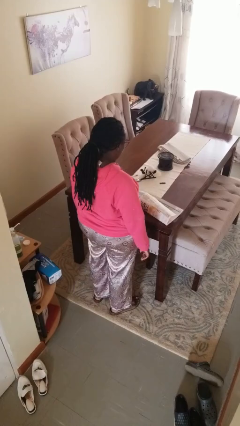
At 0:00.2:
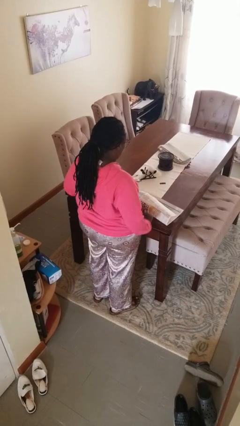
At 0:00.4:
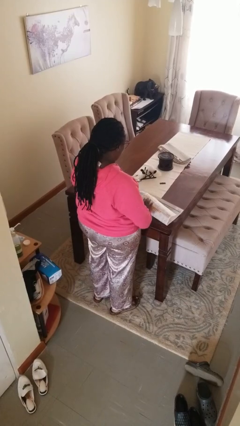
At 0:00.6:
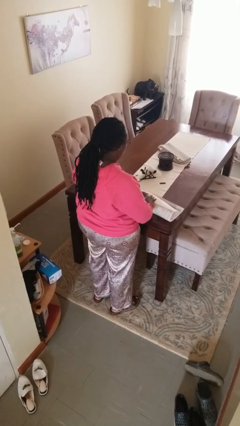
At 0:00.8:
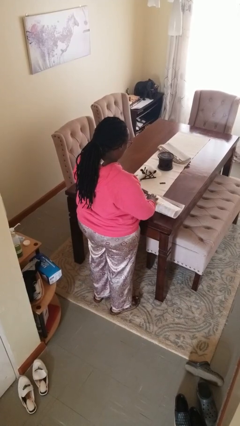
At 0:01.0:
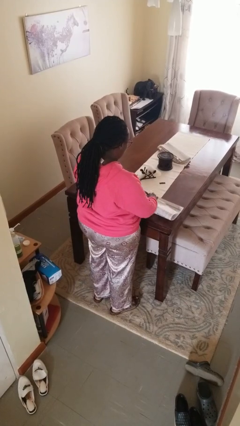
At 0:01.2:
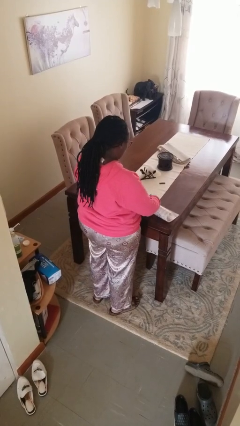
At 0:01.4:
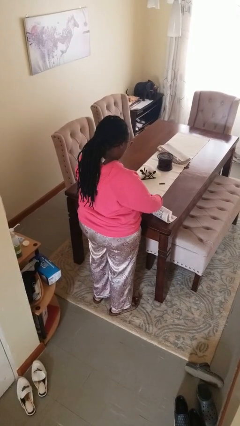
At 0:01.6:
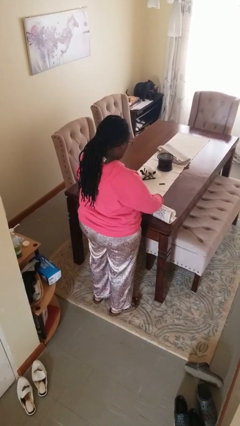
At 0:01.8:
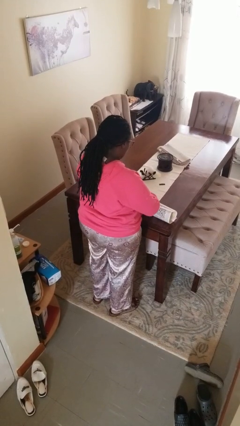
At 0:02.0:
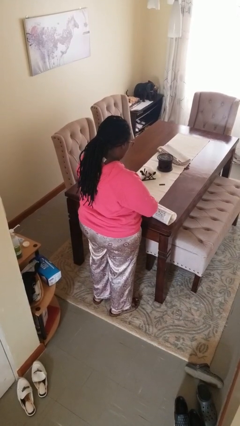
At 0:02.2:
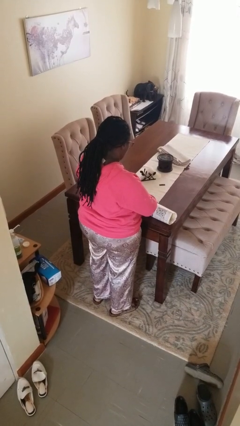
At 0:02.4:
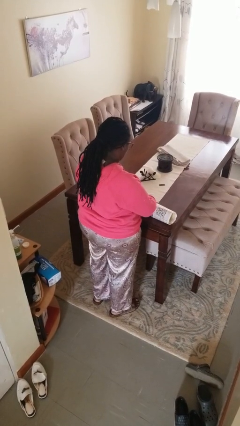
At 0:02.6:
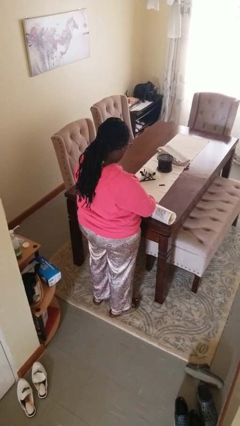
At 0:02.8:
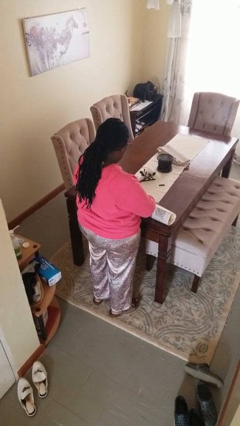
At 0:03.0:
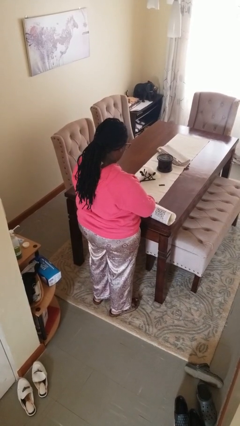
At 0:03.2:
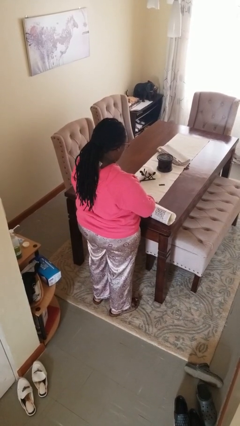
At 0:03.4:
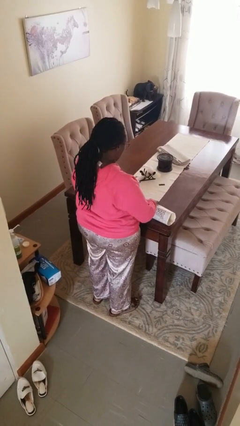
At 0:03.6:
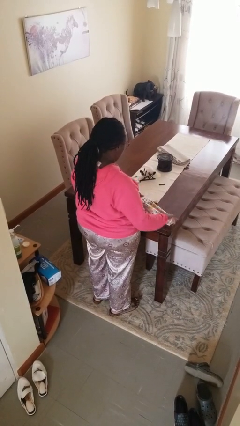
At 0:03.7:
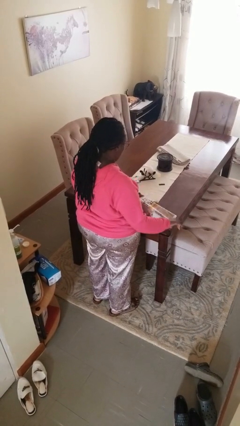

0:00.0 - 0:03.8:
person wraps box

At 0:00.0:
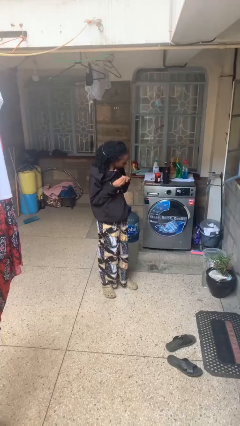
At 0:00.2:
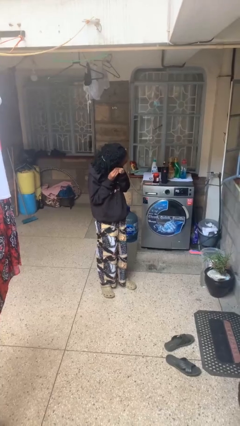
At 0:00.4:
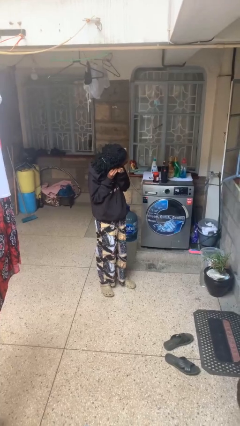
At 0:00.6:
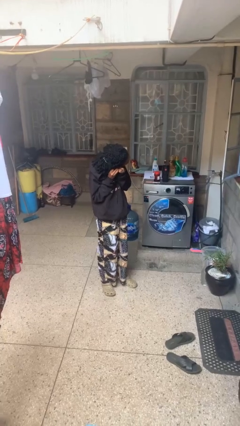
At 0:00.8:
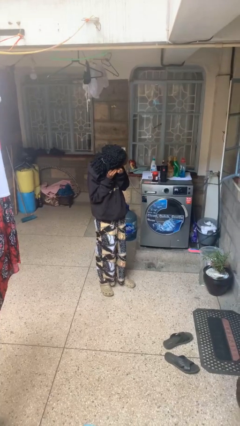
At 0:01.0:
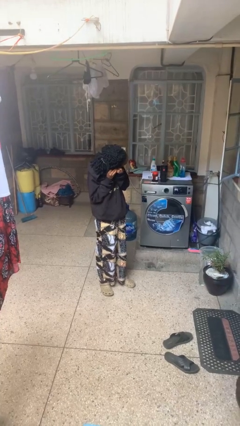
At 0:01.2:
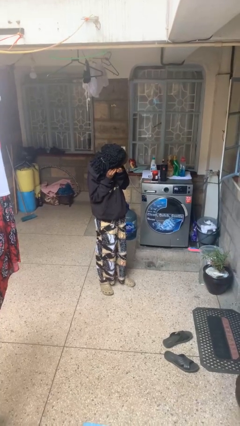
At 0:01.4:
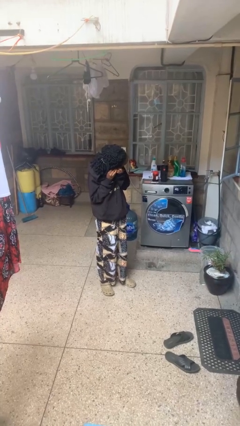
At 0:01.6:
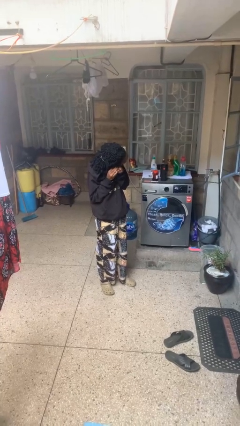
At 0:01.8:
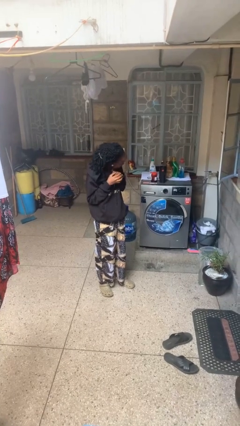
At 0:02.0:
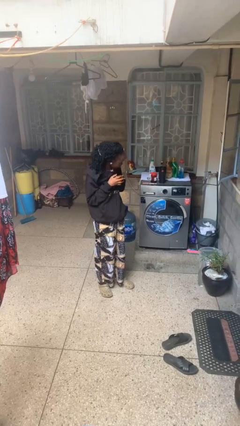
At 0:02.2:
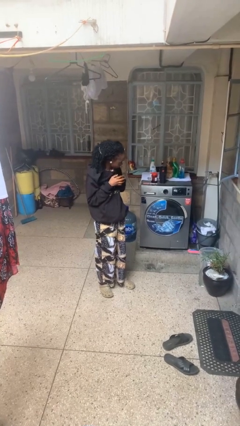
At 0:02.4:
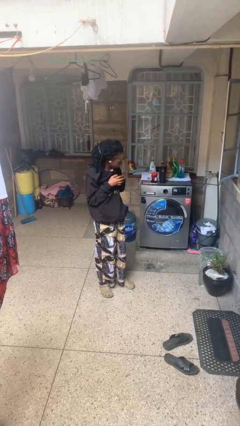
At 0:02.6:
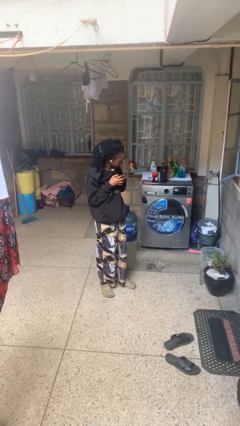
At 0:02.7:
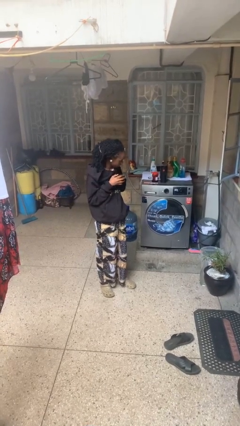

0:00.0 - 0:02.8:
person puts on earrings

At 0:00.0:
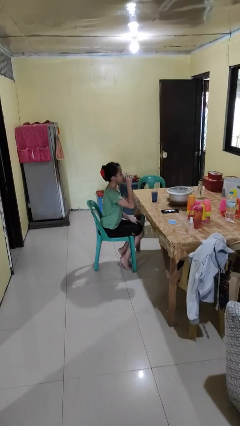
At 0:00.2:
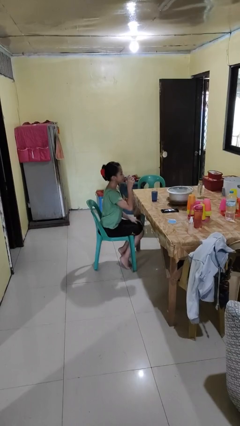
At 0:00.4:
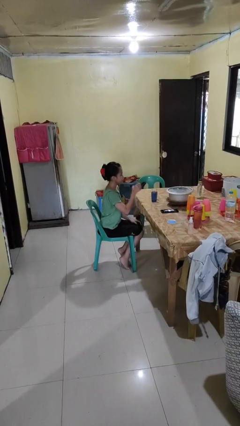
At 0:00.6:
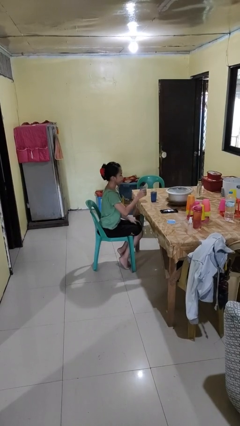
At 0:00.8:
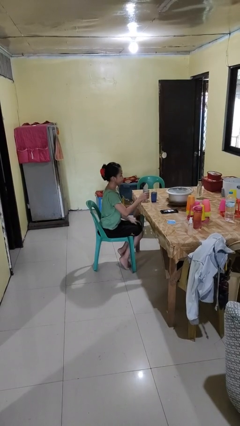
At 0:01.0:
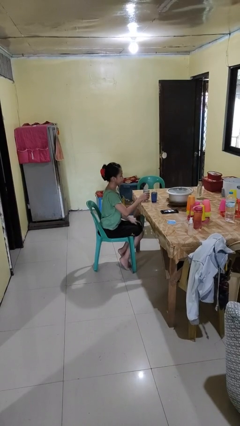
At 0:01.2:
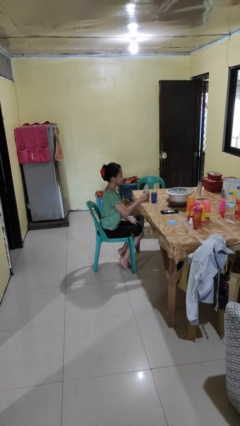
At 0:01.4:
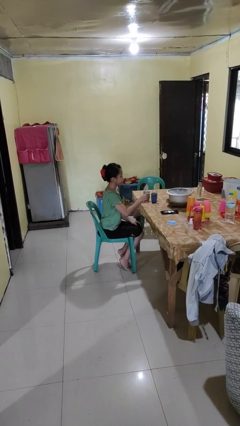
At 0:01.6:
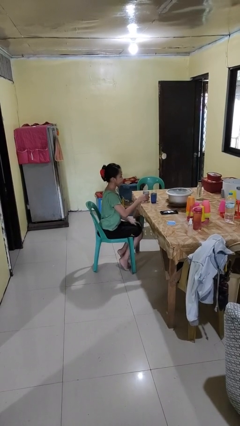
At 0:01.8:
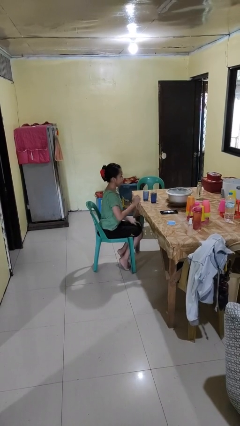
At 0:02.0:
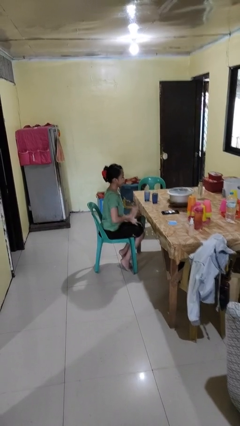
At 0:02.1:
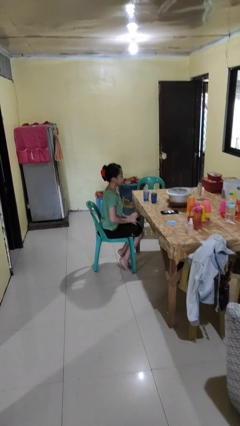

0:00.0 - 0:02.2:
person puts down object on table

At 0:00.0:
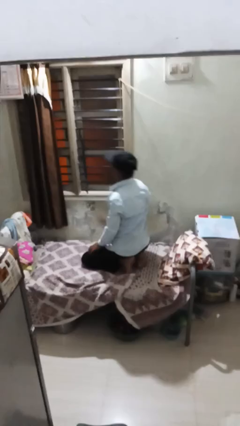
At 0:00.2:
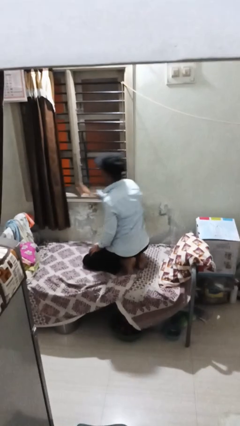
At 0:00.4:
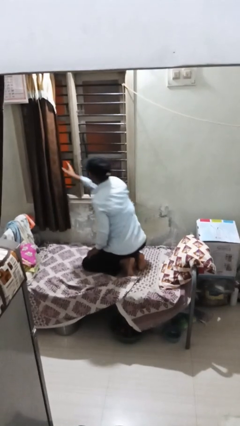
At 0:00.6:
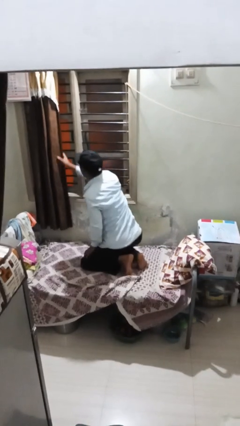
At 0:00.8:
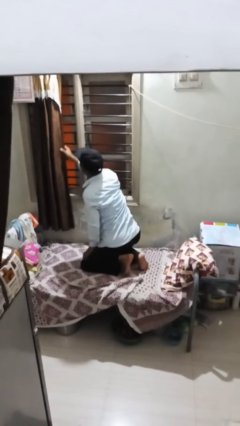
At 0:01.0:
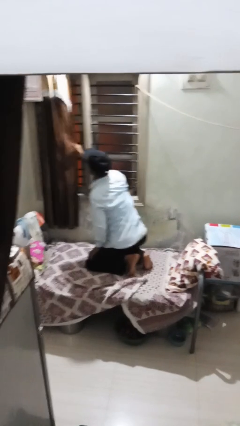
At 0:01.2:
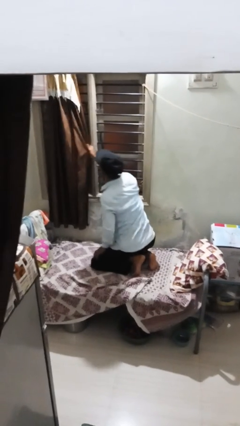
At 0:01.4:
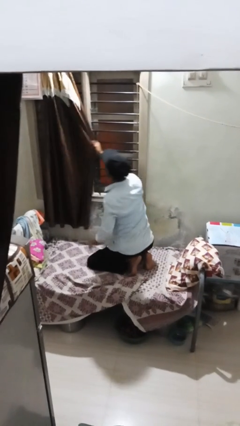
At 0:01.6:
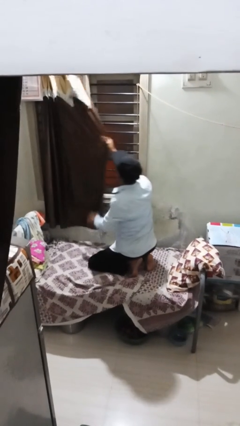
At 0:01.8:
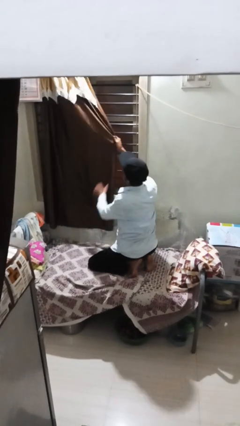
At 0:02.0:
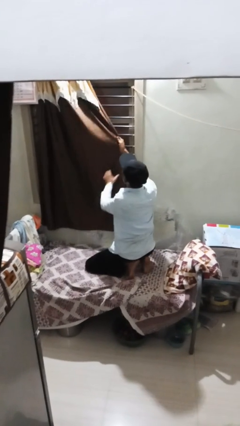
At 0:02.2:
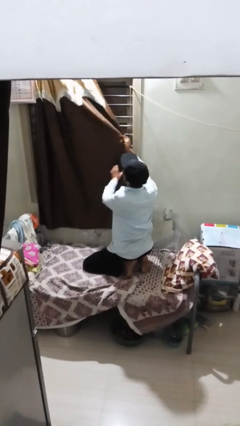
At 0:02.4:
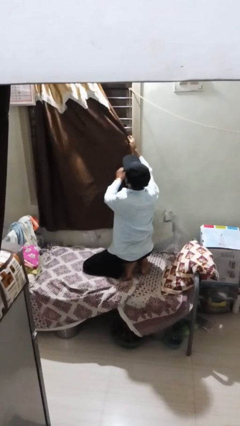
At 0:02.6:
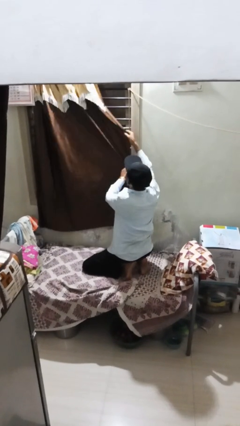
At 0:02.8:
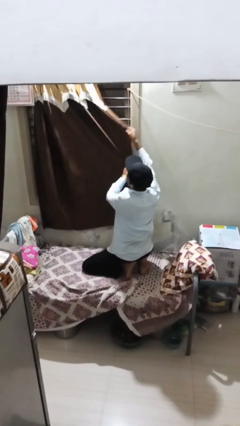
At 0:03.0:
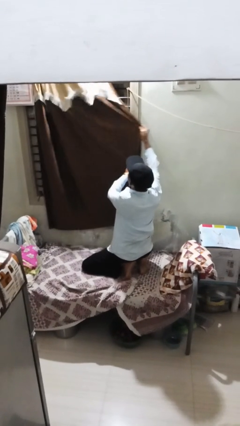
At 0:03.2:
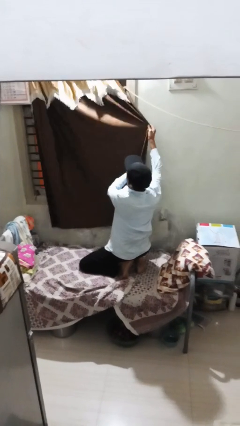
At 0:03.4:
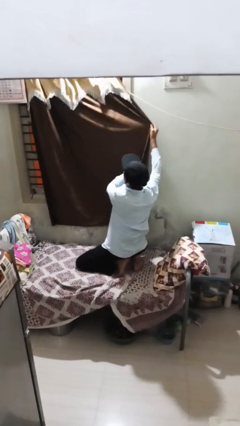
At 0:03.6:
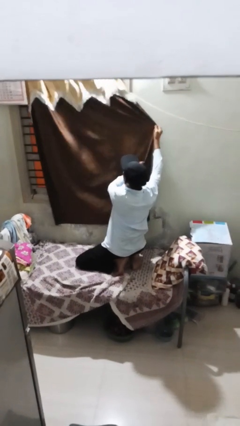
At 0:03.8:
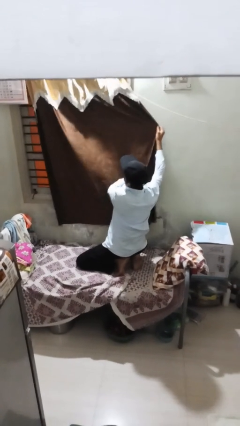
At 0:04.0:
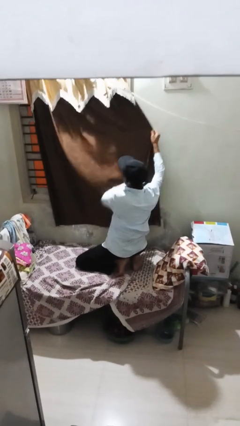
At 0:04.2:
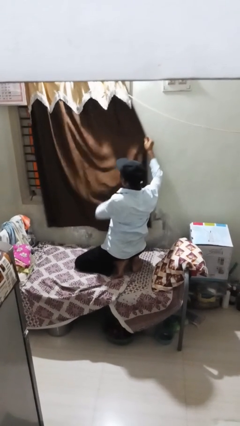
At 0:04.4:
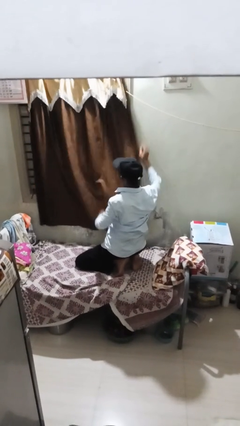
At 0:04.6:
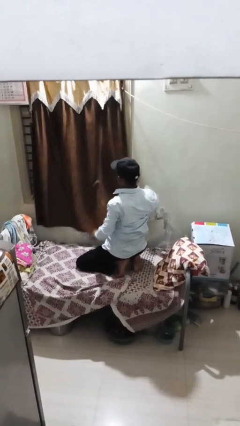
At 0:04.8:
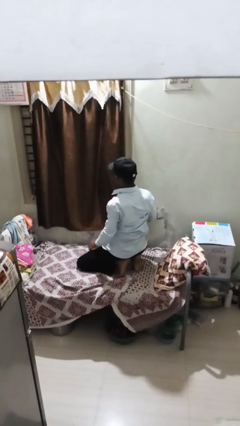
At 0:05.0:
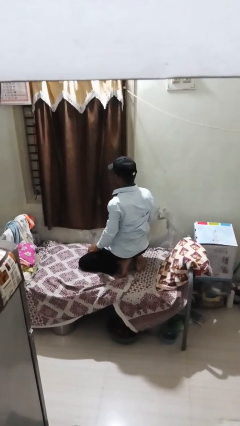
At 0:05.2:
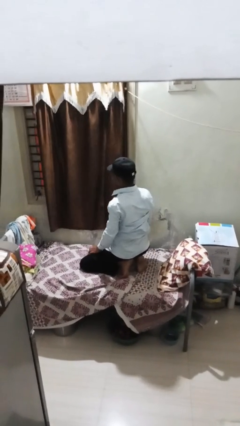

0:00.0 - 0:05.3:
person closes curtains

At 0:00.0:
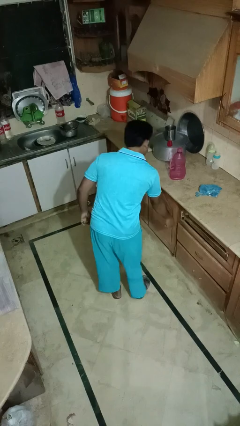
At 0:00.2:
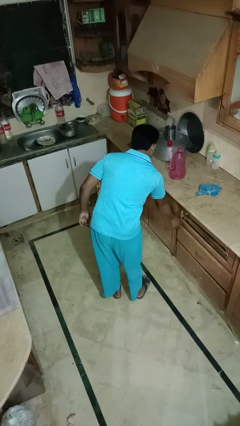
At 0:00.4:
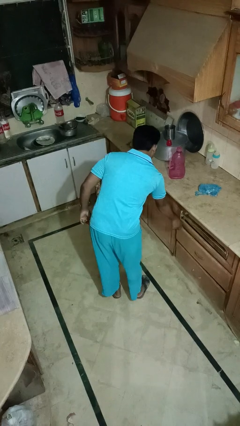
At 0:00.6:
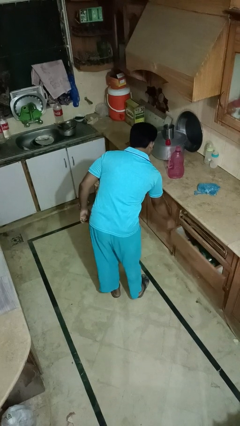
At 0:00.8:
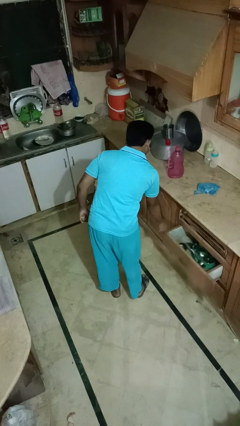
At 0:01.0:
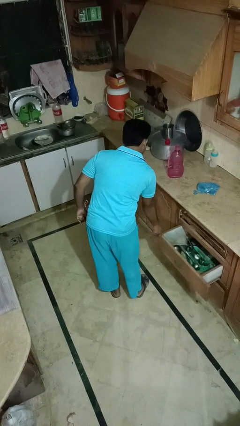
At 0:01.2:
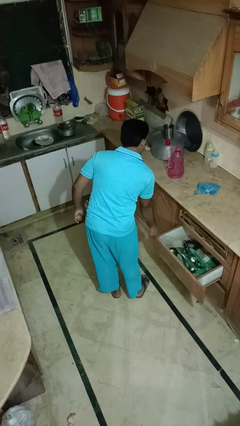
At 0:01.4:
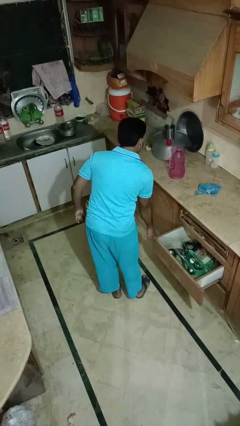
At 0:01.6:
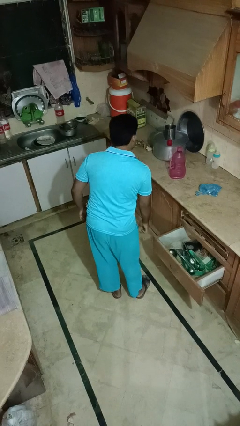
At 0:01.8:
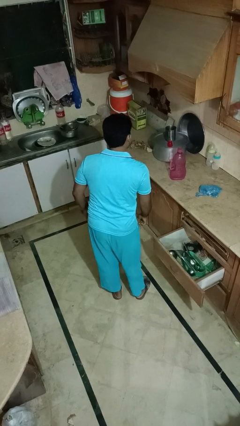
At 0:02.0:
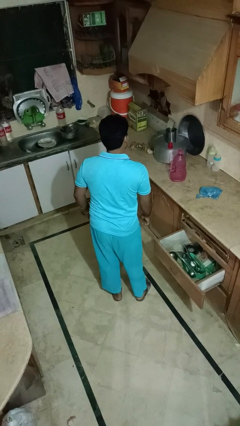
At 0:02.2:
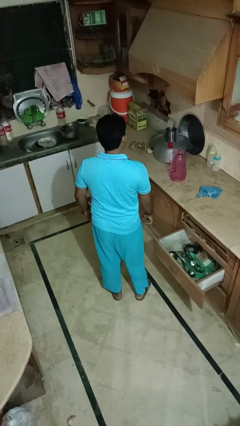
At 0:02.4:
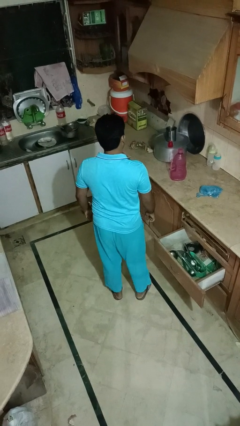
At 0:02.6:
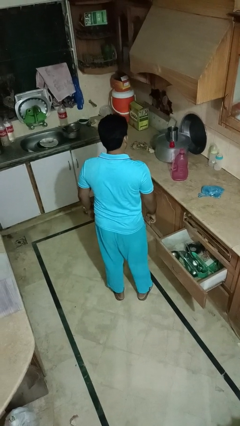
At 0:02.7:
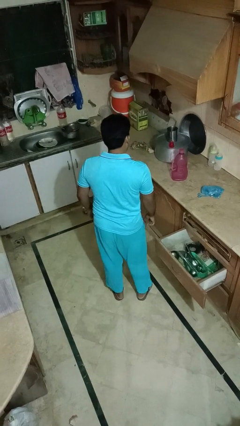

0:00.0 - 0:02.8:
person opens kitchen drawer

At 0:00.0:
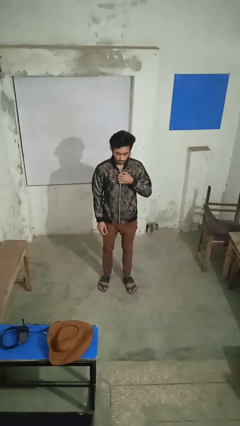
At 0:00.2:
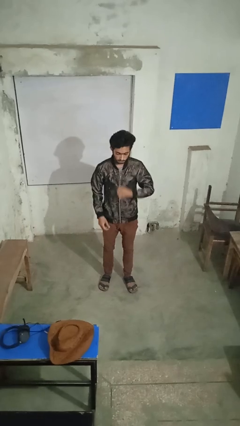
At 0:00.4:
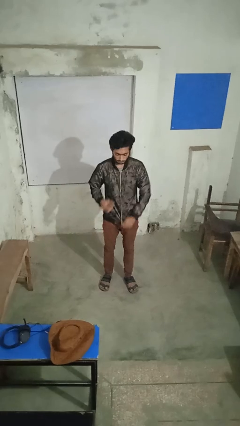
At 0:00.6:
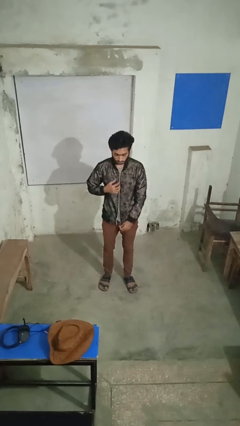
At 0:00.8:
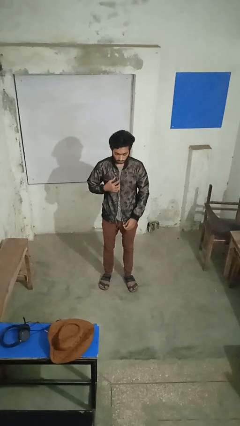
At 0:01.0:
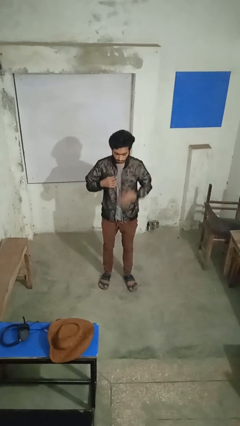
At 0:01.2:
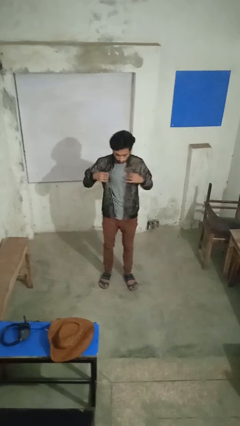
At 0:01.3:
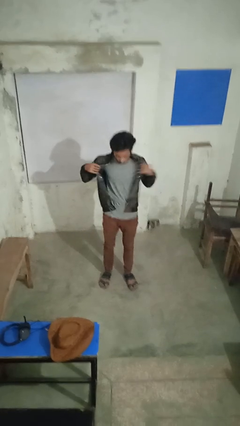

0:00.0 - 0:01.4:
person unzips jacket
